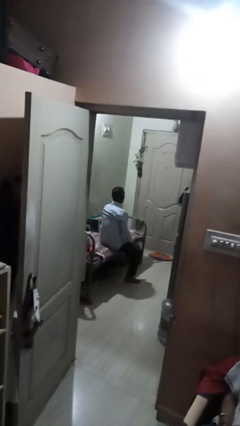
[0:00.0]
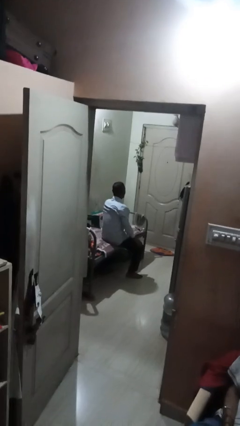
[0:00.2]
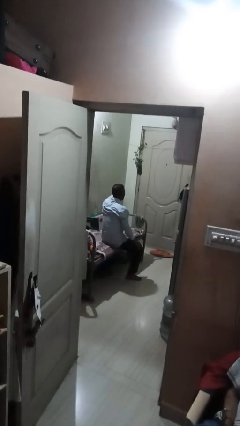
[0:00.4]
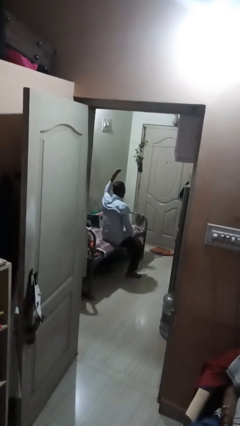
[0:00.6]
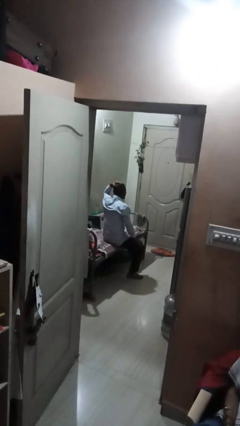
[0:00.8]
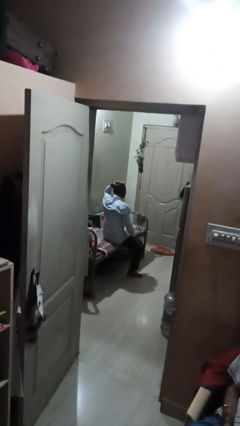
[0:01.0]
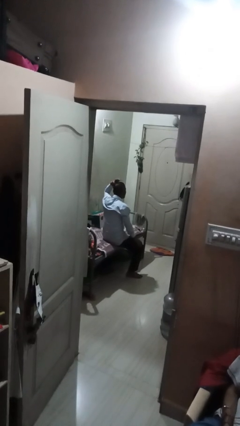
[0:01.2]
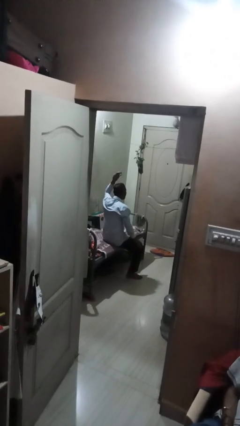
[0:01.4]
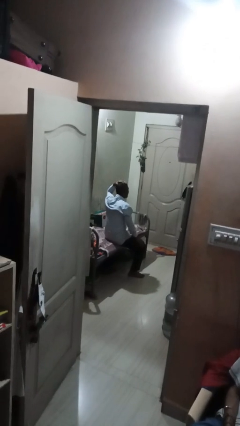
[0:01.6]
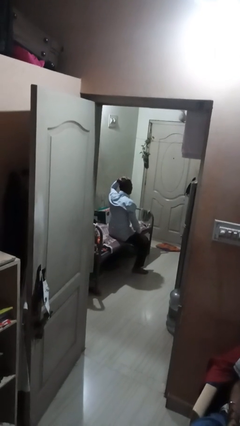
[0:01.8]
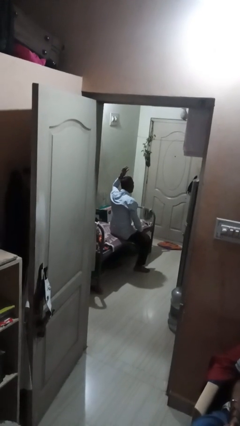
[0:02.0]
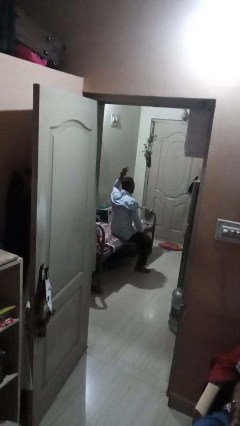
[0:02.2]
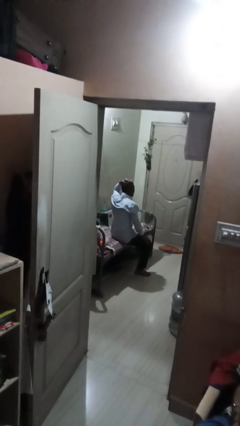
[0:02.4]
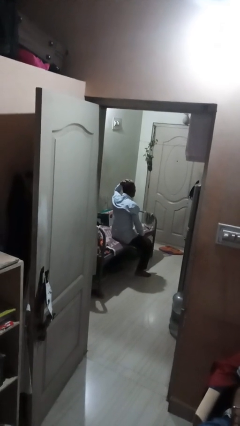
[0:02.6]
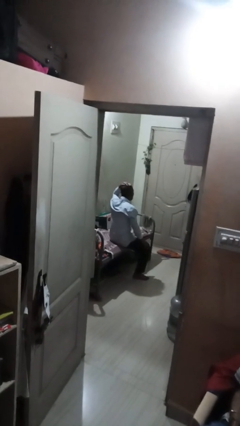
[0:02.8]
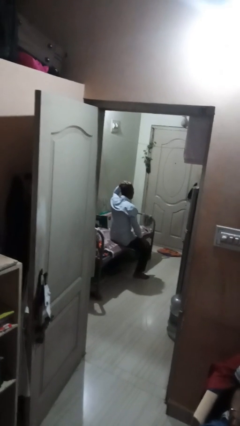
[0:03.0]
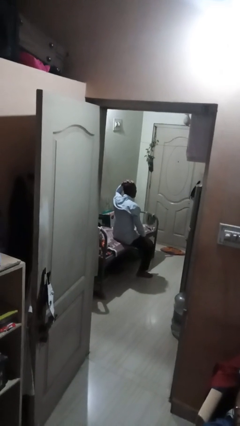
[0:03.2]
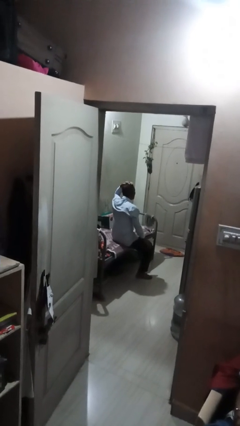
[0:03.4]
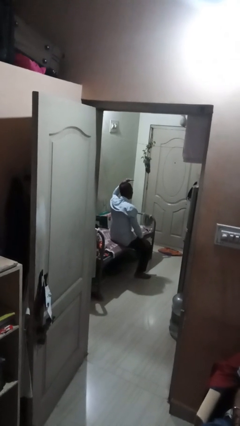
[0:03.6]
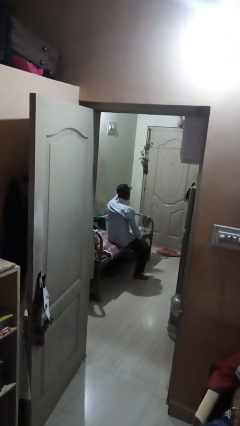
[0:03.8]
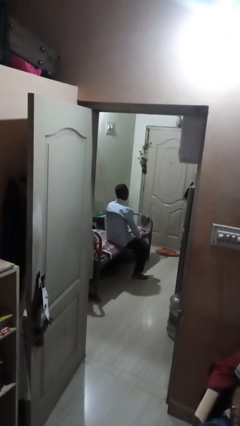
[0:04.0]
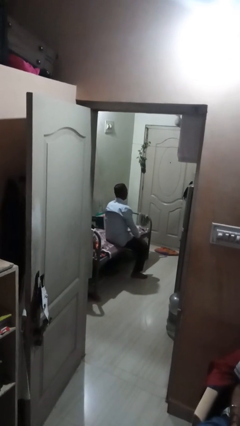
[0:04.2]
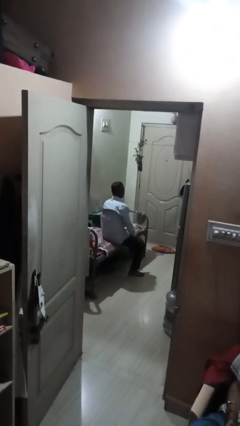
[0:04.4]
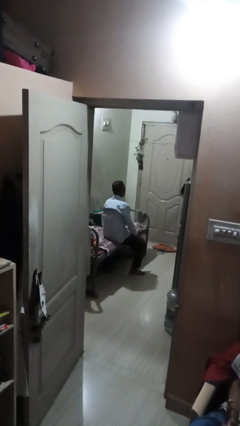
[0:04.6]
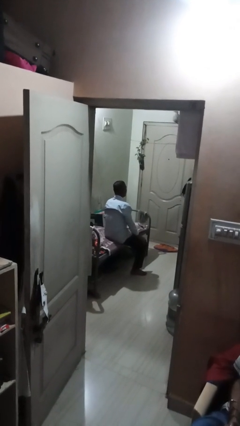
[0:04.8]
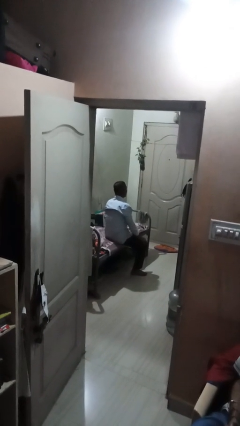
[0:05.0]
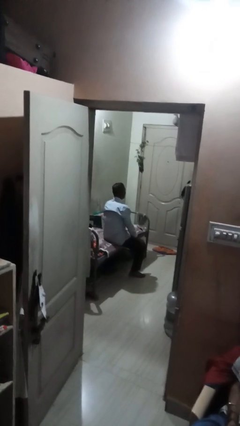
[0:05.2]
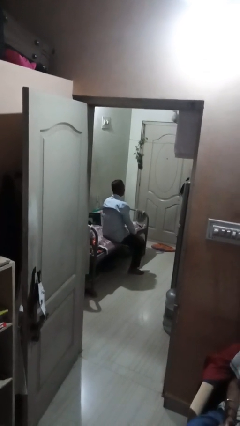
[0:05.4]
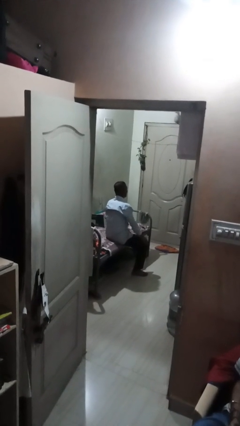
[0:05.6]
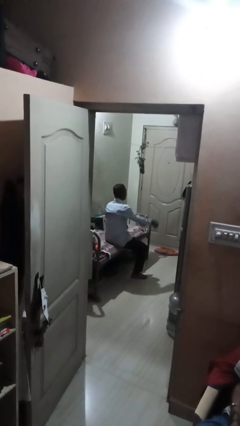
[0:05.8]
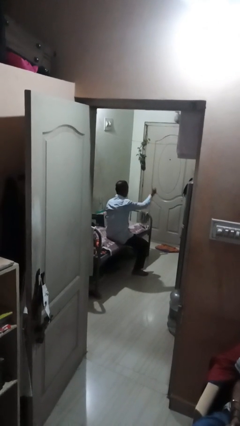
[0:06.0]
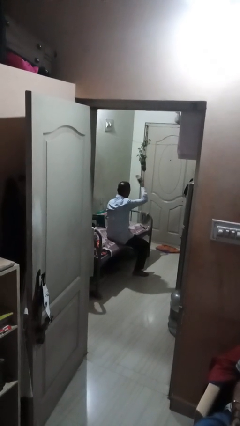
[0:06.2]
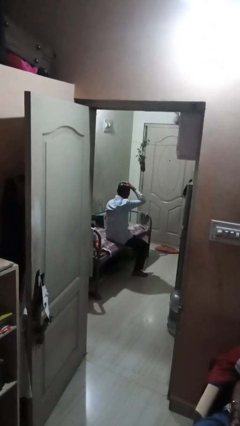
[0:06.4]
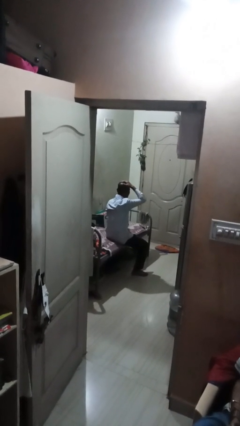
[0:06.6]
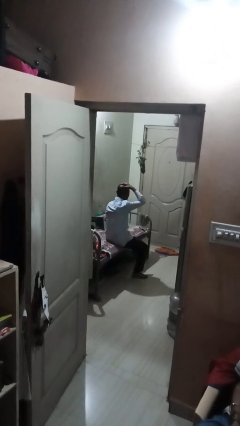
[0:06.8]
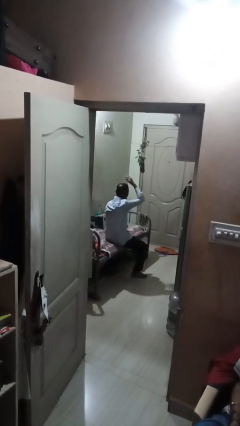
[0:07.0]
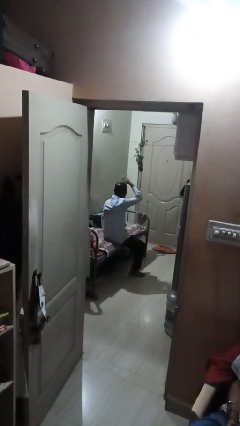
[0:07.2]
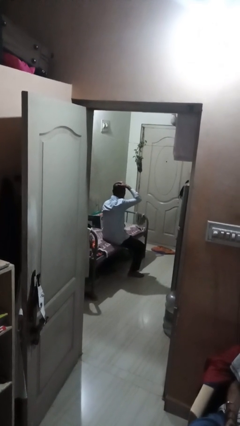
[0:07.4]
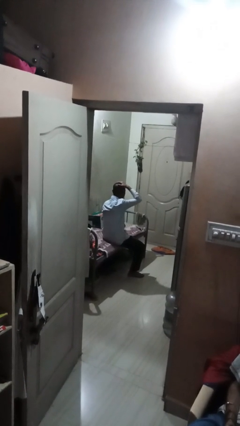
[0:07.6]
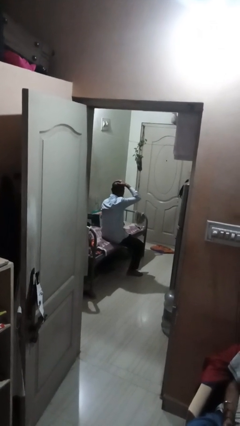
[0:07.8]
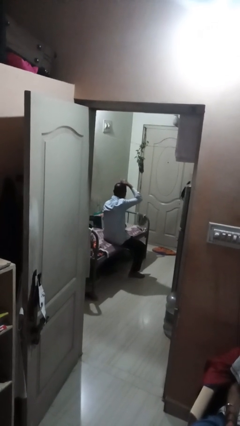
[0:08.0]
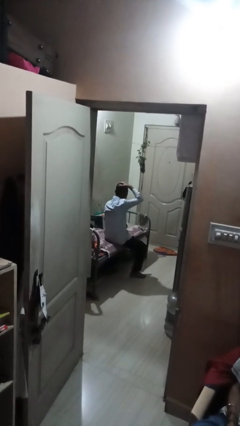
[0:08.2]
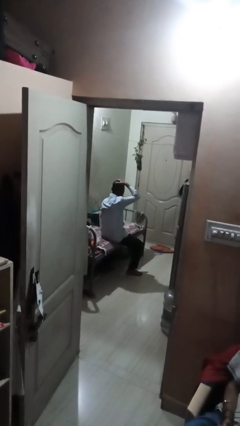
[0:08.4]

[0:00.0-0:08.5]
person pats head

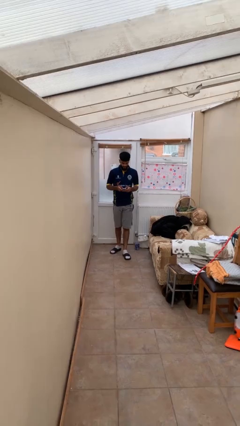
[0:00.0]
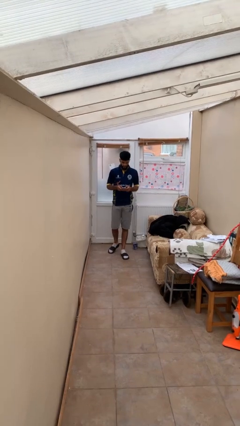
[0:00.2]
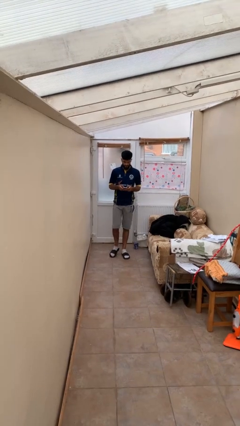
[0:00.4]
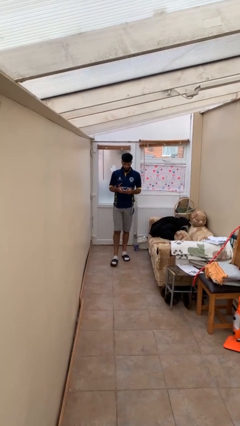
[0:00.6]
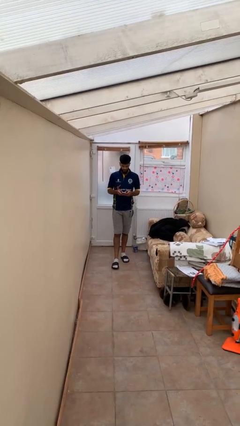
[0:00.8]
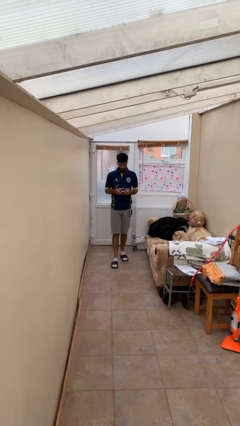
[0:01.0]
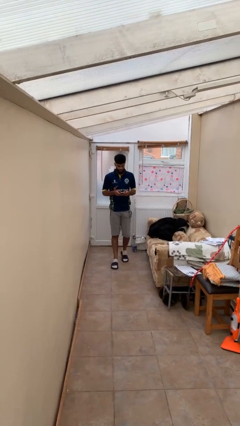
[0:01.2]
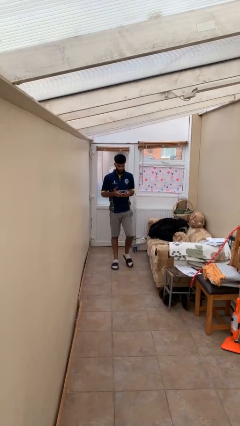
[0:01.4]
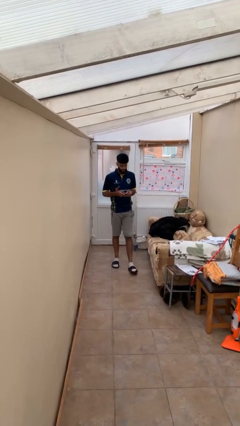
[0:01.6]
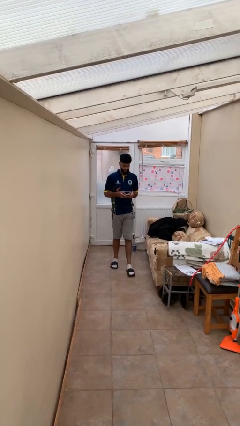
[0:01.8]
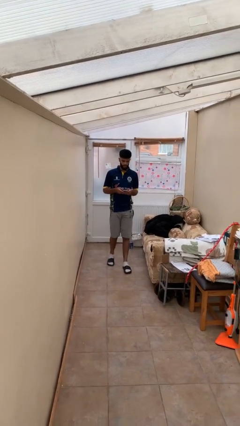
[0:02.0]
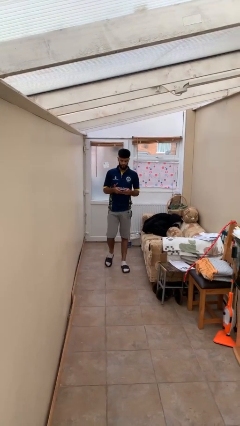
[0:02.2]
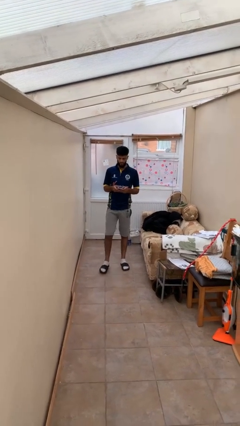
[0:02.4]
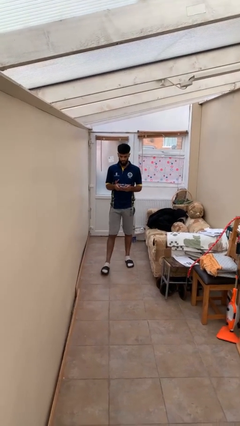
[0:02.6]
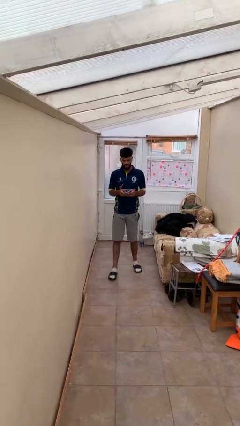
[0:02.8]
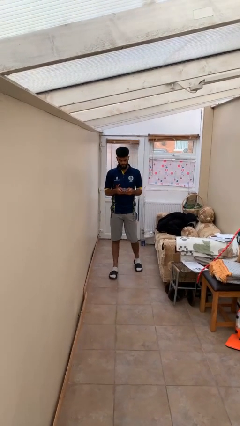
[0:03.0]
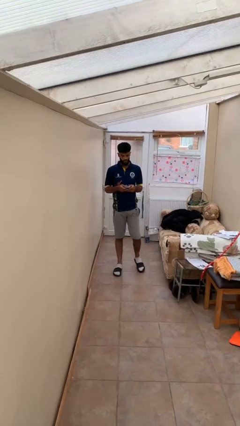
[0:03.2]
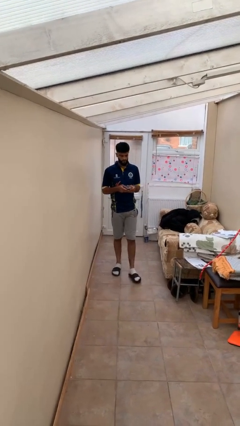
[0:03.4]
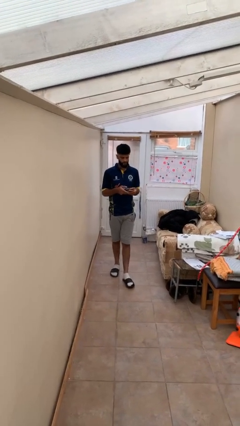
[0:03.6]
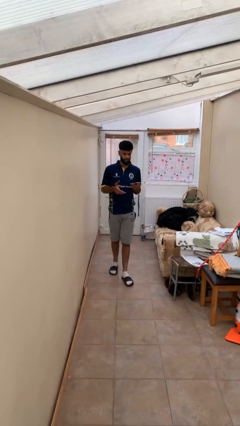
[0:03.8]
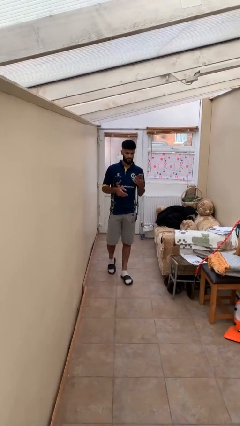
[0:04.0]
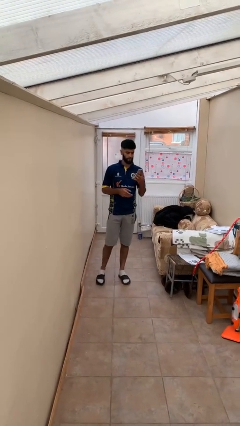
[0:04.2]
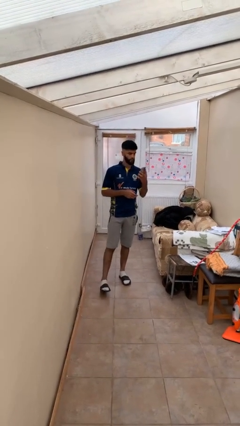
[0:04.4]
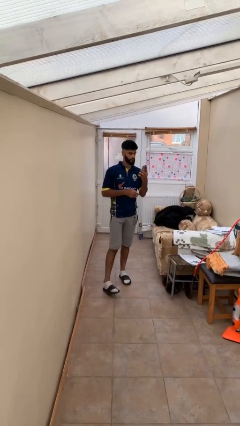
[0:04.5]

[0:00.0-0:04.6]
person texts on phone

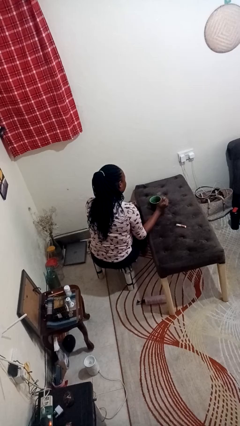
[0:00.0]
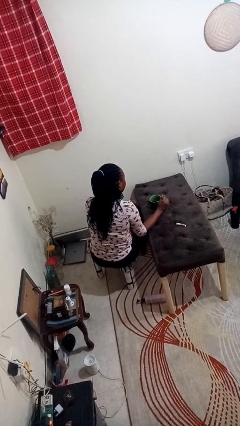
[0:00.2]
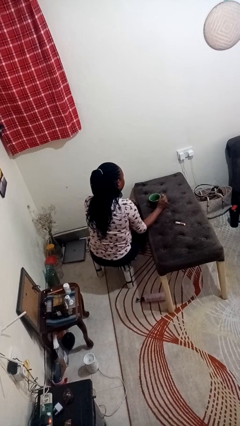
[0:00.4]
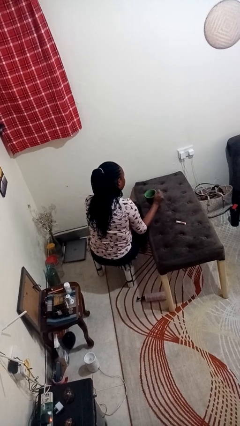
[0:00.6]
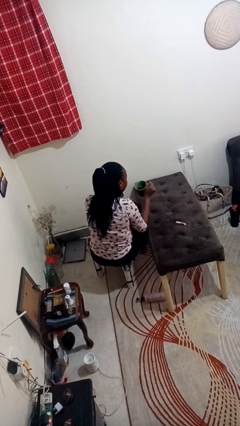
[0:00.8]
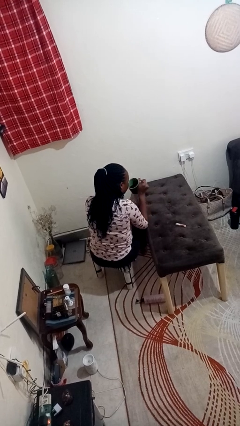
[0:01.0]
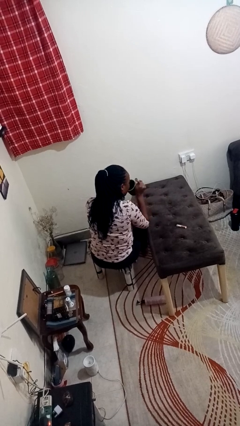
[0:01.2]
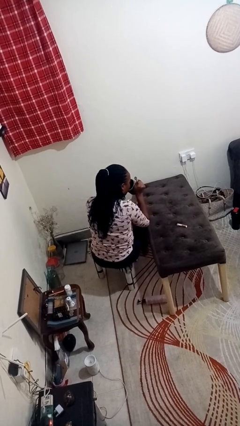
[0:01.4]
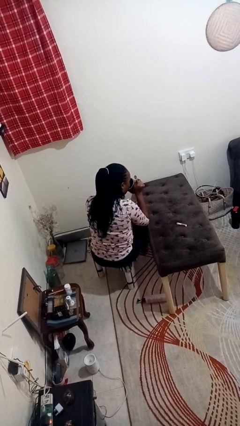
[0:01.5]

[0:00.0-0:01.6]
person drinks from mug

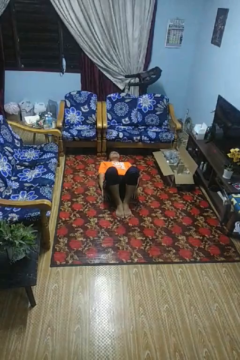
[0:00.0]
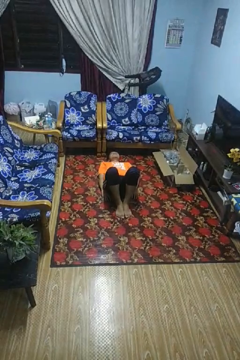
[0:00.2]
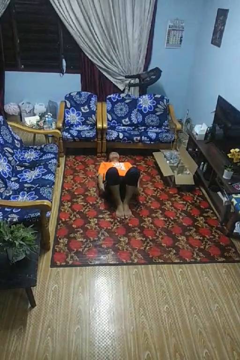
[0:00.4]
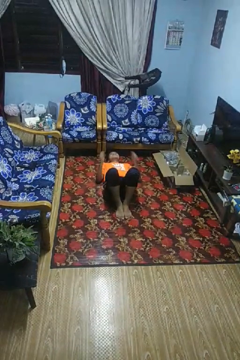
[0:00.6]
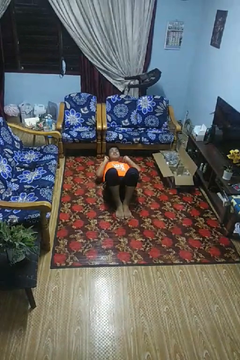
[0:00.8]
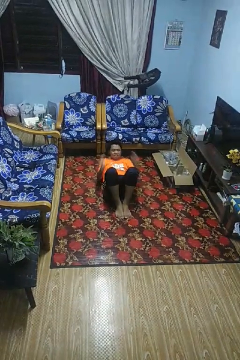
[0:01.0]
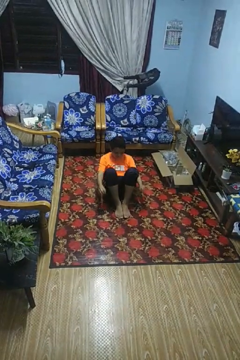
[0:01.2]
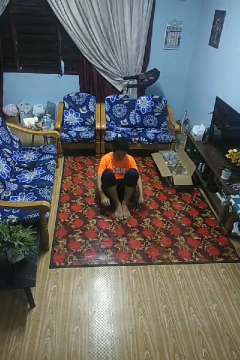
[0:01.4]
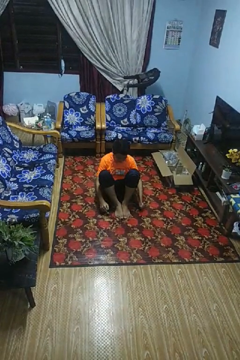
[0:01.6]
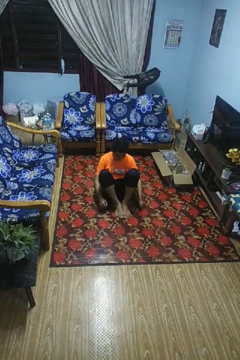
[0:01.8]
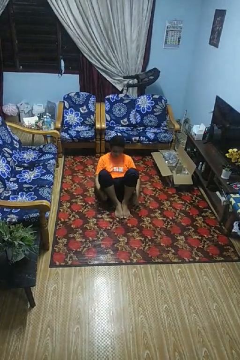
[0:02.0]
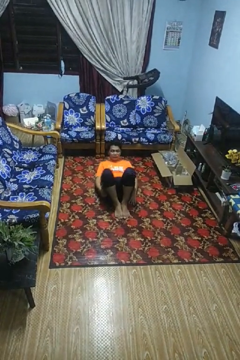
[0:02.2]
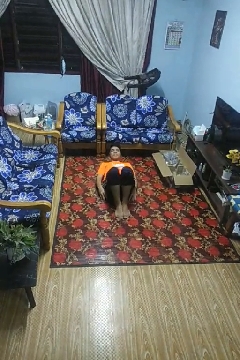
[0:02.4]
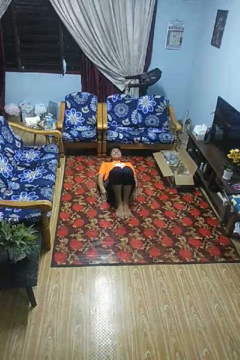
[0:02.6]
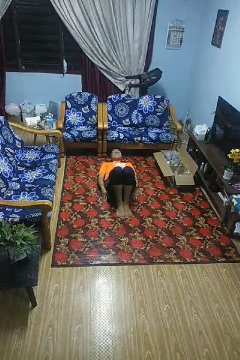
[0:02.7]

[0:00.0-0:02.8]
person exercises with situp

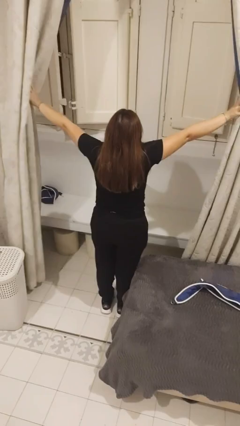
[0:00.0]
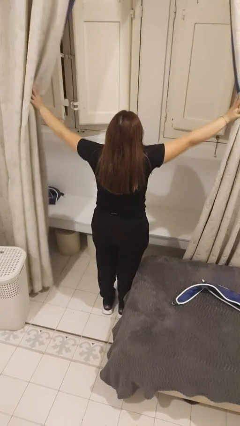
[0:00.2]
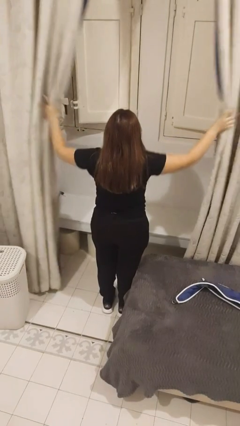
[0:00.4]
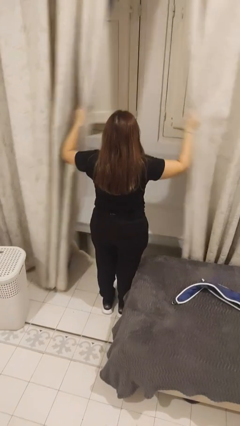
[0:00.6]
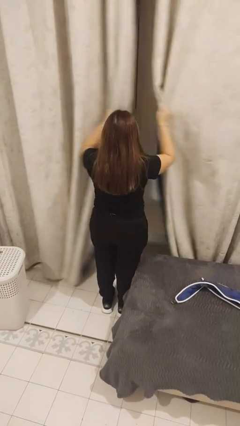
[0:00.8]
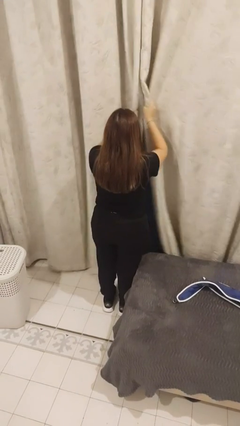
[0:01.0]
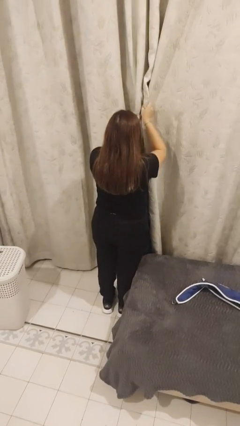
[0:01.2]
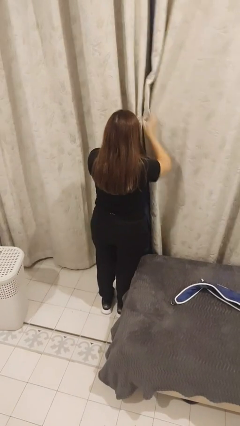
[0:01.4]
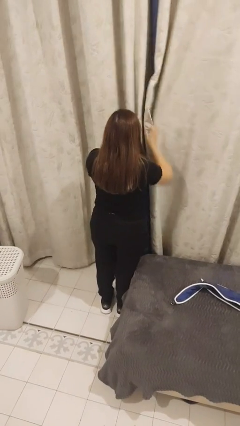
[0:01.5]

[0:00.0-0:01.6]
person closes curtains
